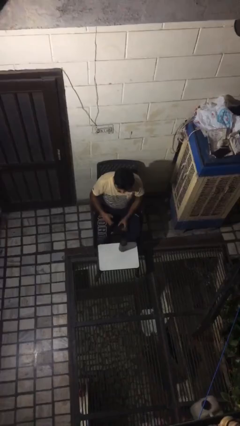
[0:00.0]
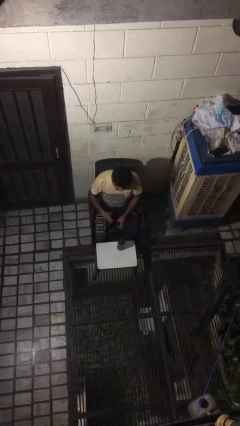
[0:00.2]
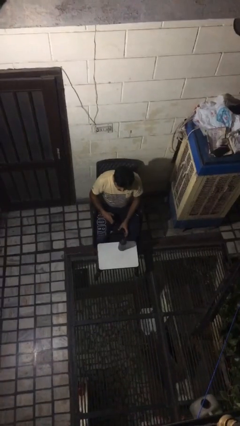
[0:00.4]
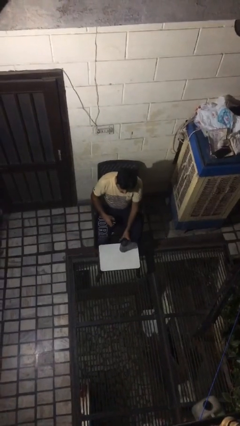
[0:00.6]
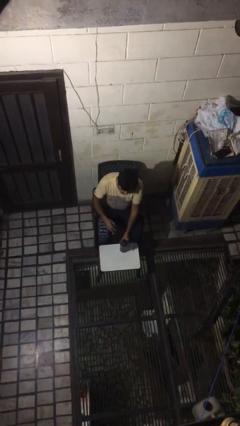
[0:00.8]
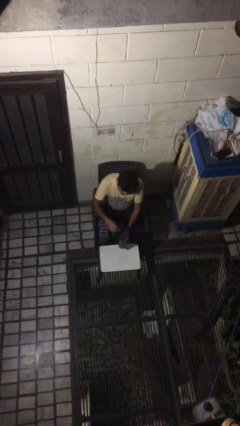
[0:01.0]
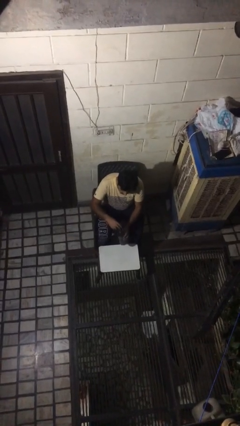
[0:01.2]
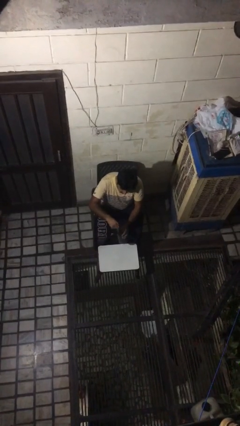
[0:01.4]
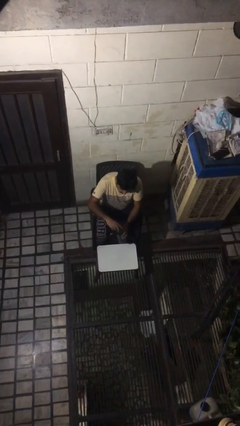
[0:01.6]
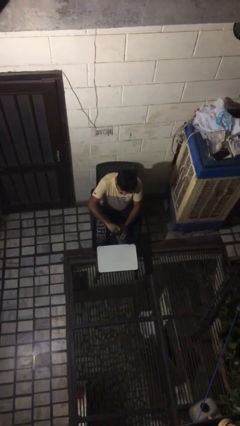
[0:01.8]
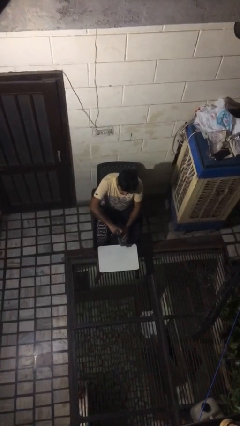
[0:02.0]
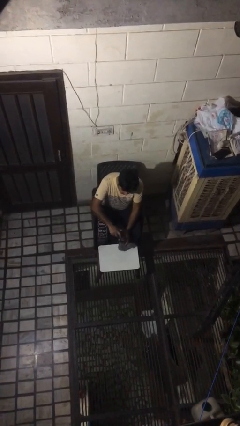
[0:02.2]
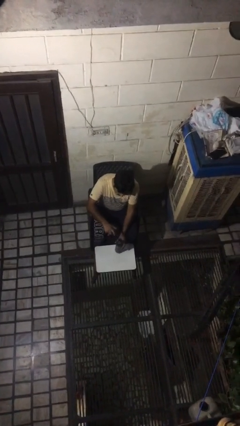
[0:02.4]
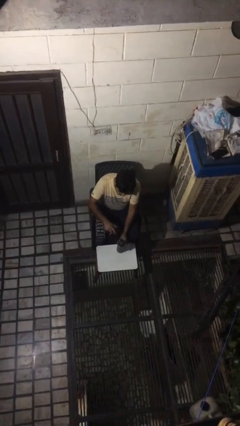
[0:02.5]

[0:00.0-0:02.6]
person screws lid to bottle

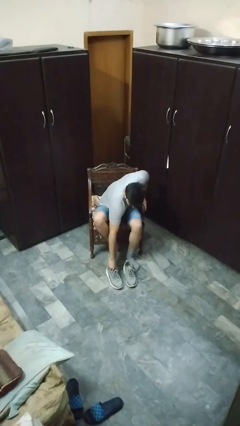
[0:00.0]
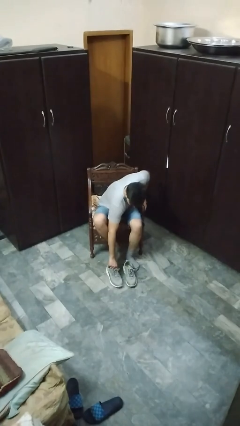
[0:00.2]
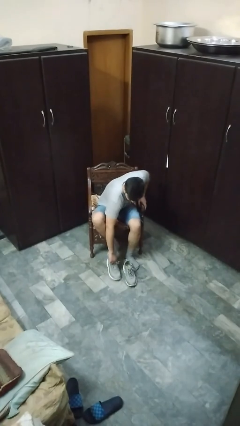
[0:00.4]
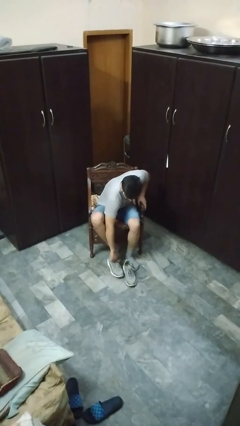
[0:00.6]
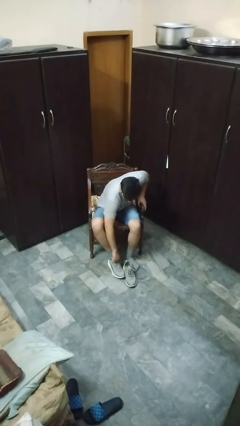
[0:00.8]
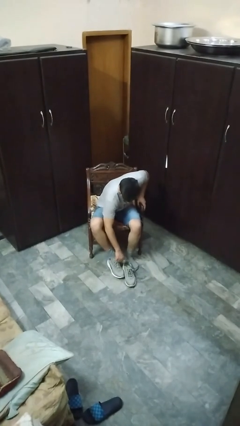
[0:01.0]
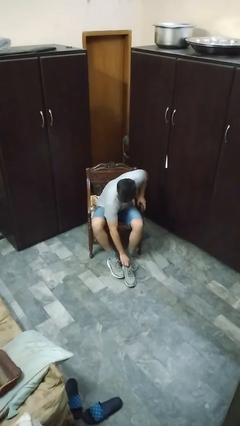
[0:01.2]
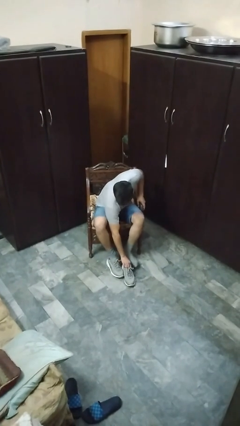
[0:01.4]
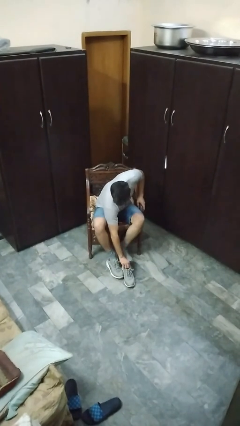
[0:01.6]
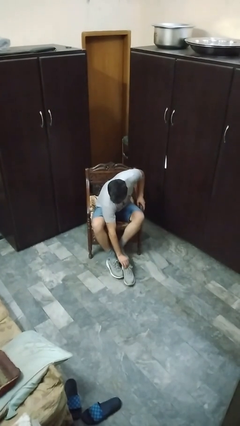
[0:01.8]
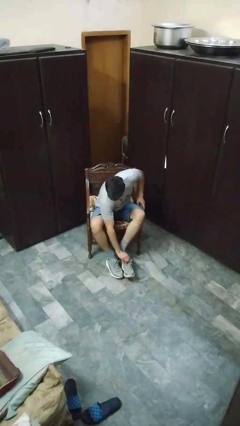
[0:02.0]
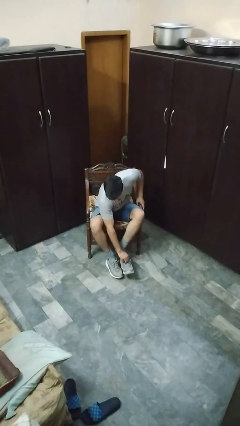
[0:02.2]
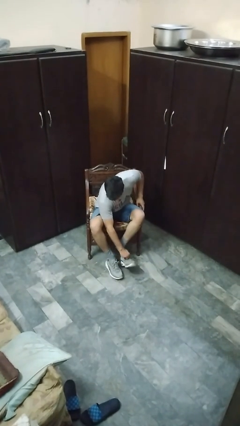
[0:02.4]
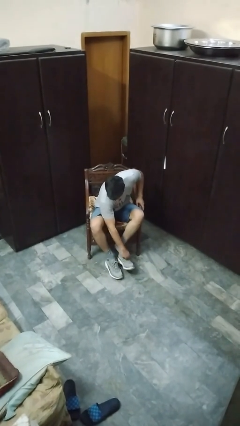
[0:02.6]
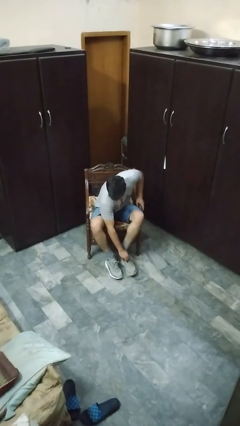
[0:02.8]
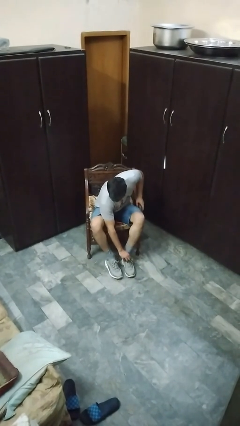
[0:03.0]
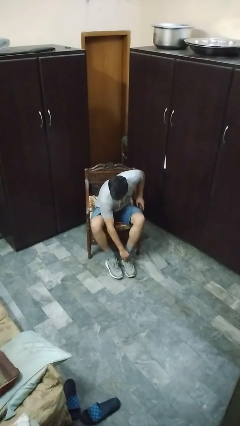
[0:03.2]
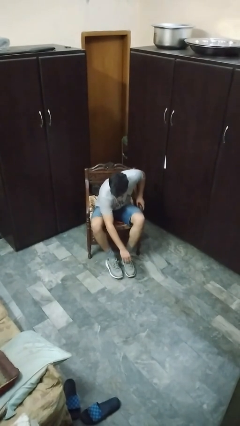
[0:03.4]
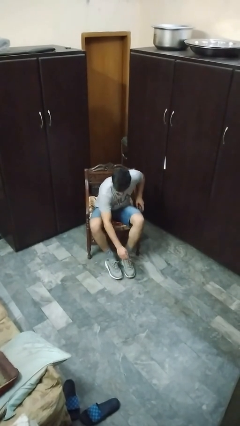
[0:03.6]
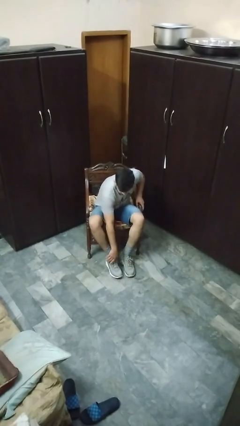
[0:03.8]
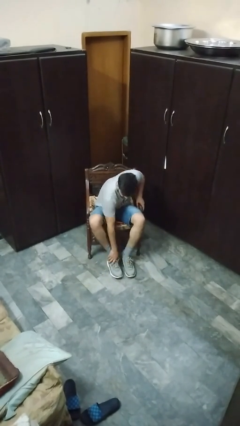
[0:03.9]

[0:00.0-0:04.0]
person puts on shoes

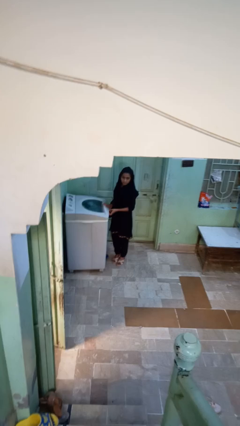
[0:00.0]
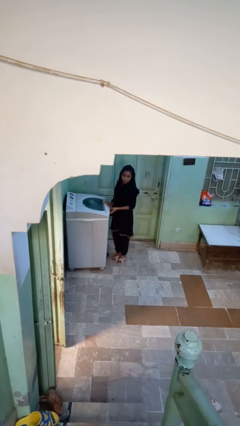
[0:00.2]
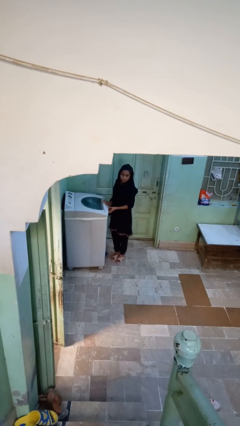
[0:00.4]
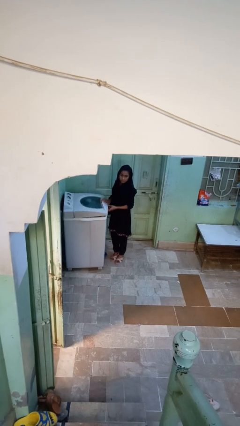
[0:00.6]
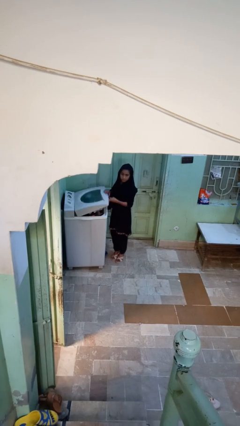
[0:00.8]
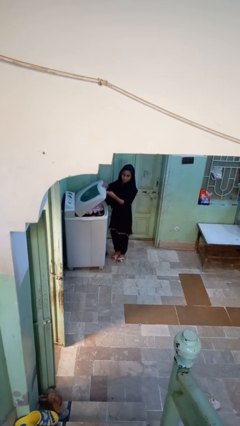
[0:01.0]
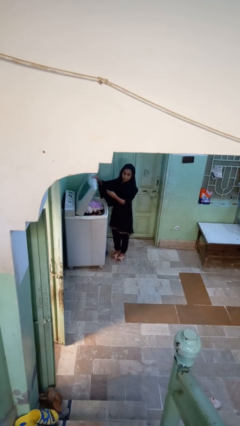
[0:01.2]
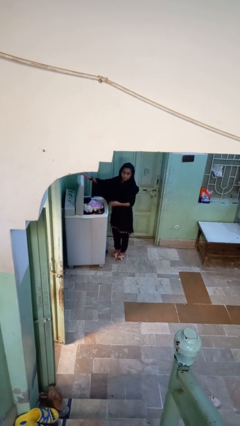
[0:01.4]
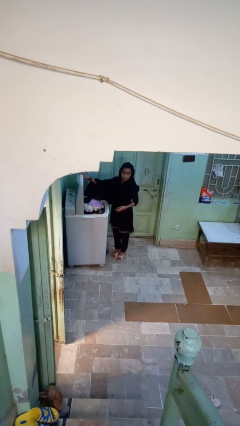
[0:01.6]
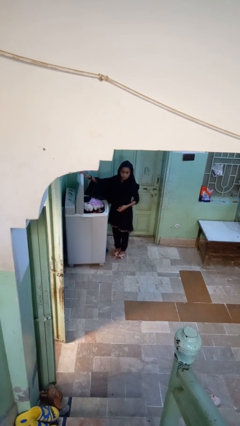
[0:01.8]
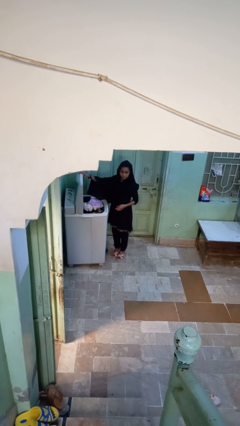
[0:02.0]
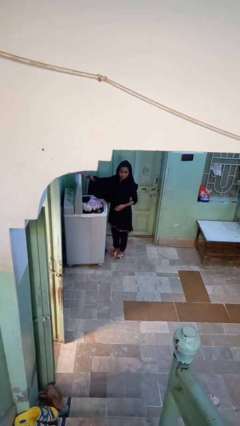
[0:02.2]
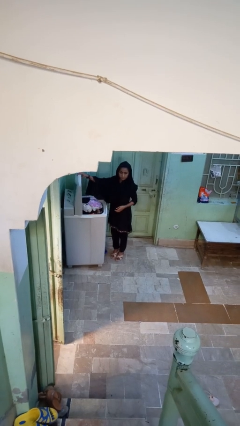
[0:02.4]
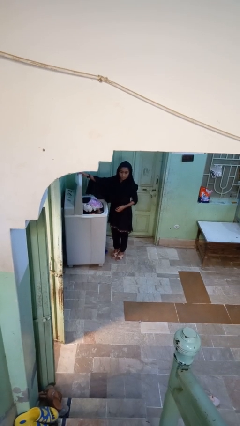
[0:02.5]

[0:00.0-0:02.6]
person opens clothes washer

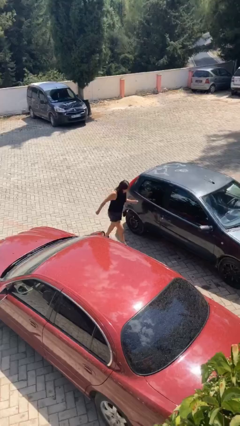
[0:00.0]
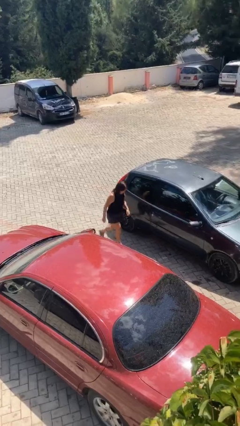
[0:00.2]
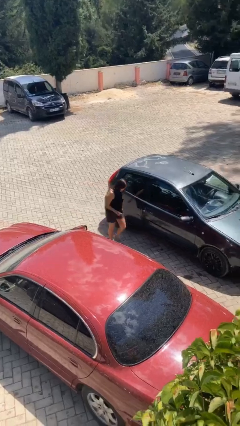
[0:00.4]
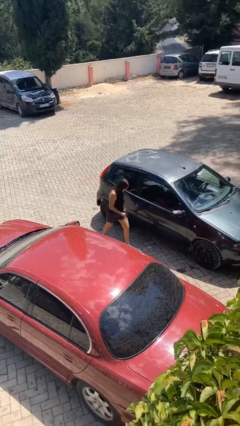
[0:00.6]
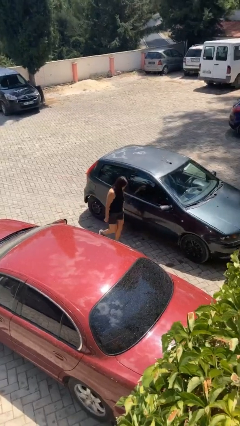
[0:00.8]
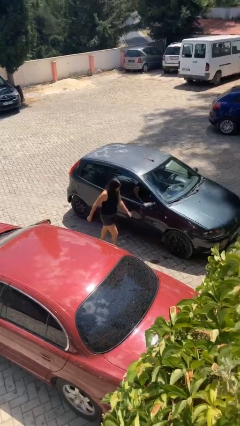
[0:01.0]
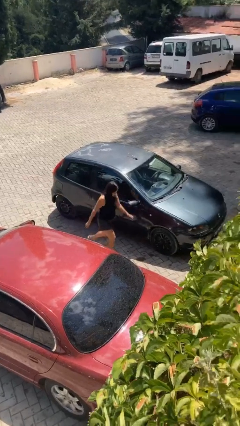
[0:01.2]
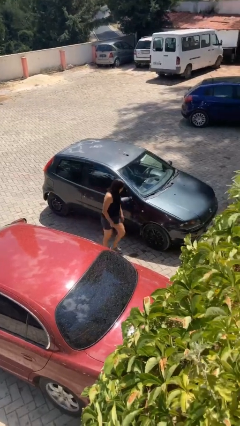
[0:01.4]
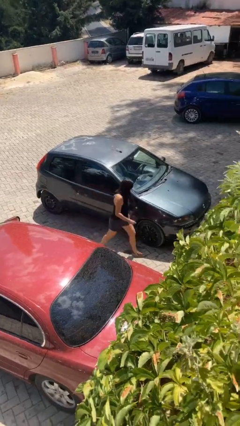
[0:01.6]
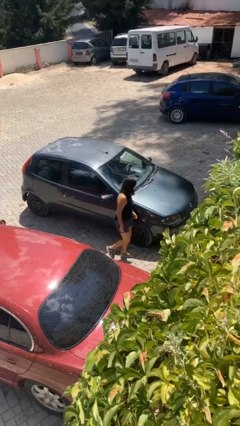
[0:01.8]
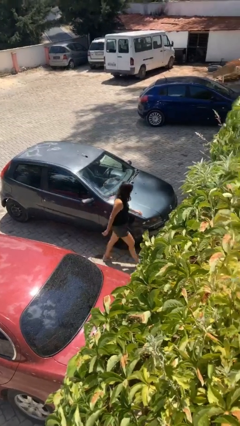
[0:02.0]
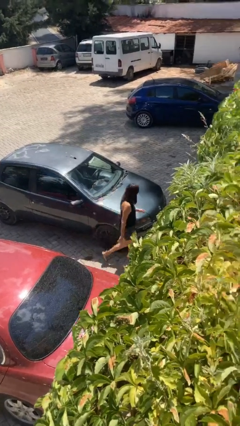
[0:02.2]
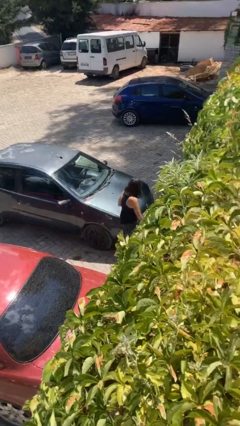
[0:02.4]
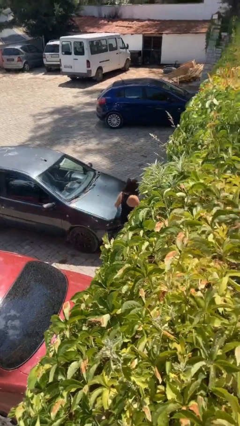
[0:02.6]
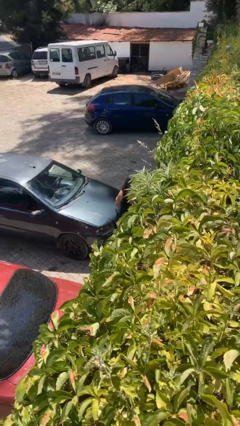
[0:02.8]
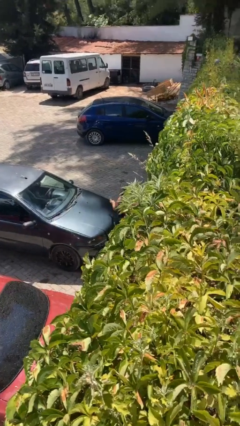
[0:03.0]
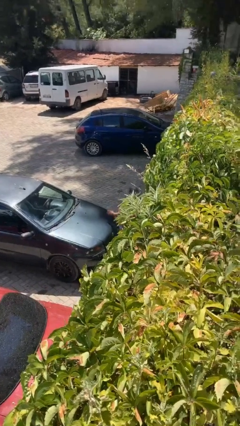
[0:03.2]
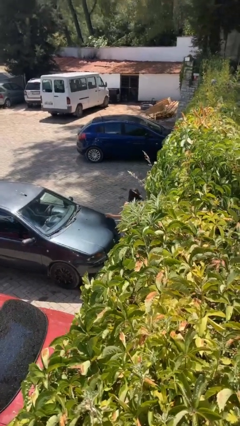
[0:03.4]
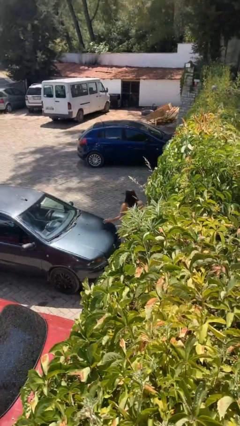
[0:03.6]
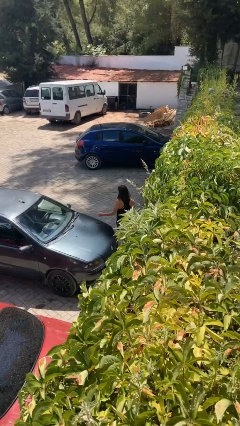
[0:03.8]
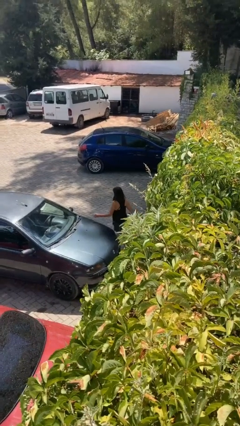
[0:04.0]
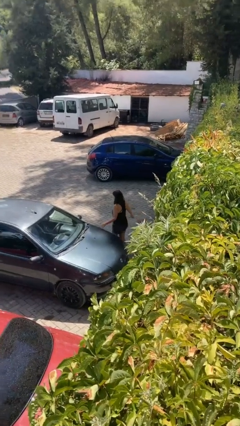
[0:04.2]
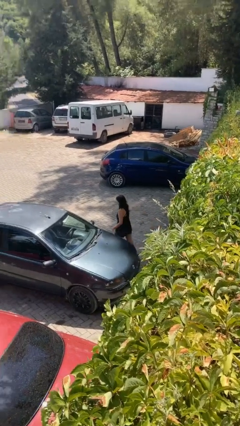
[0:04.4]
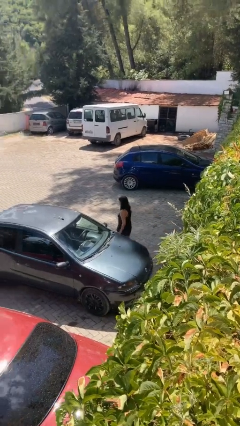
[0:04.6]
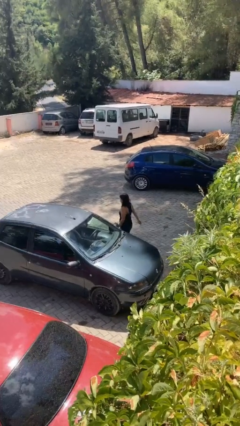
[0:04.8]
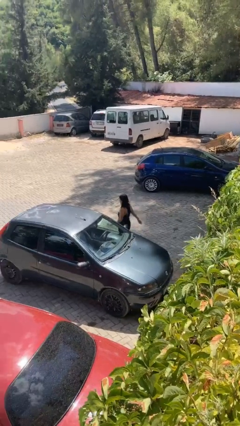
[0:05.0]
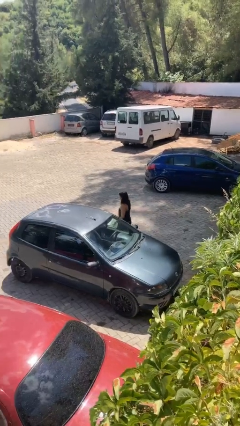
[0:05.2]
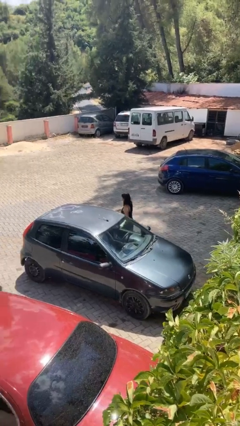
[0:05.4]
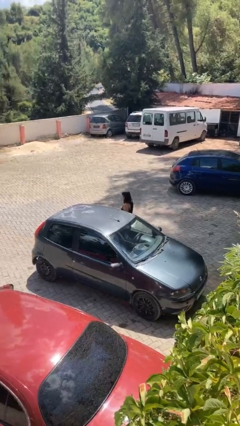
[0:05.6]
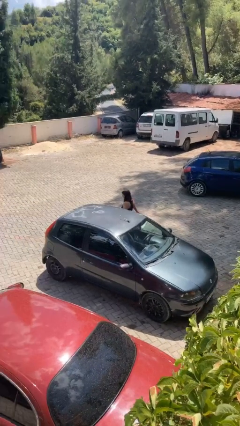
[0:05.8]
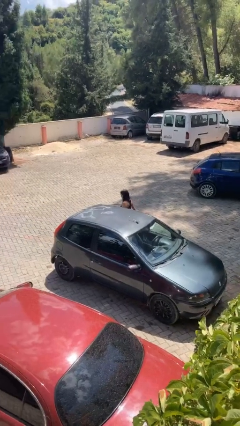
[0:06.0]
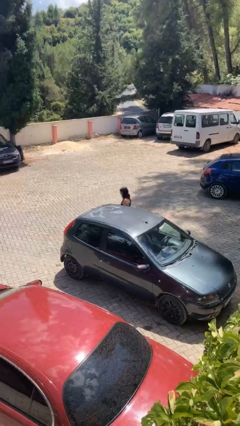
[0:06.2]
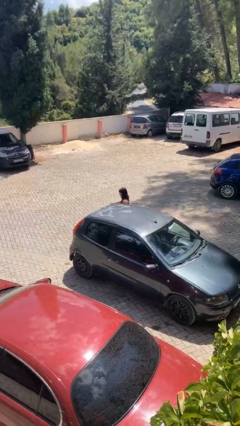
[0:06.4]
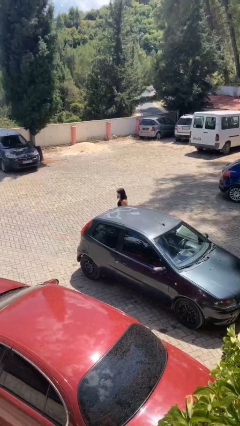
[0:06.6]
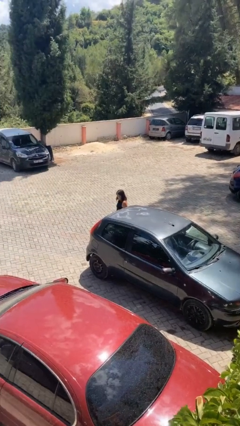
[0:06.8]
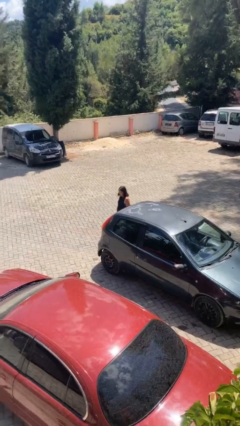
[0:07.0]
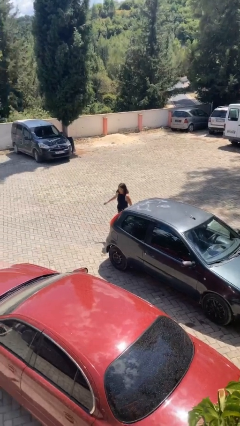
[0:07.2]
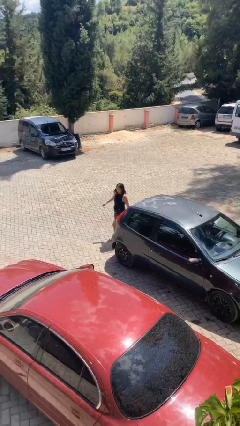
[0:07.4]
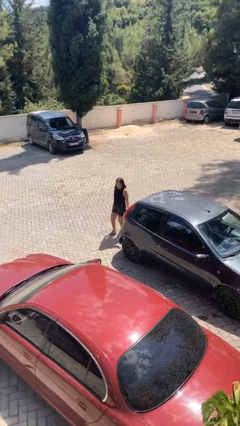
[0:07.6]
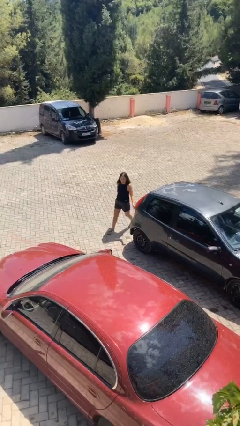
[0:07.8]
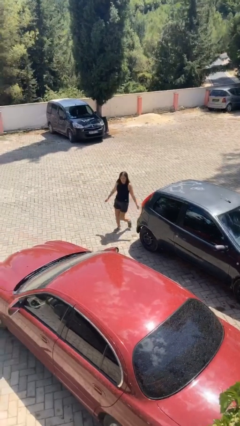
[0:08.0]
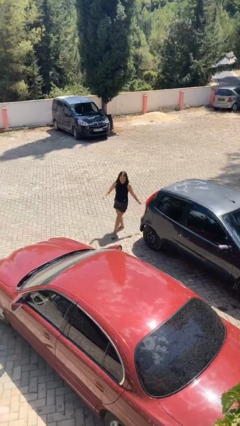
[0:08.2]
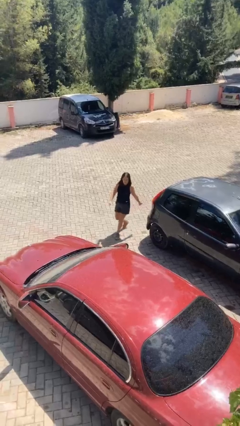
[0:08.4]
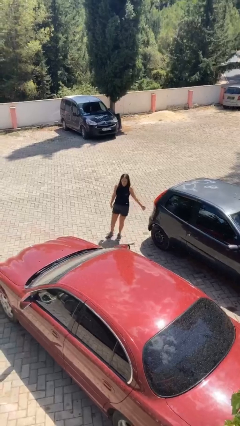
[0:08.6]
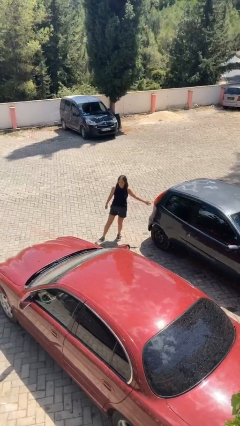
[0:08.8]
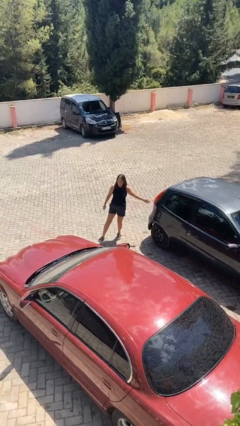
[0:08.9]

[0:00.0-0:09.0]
person walks around car
